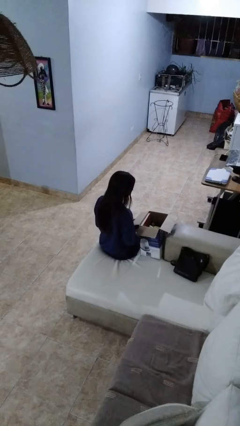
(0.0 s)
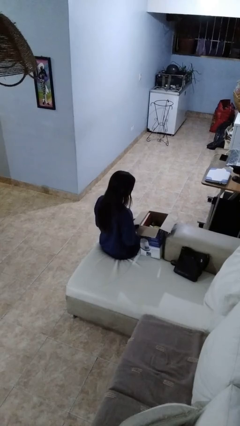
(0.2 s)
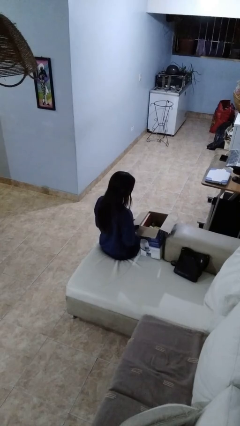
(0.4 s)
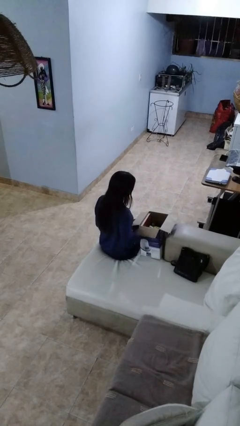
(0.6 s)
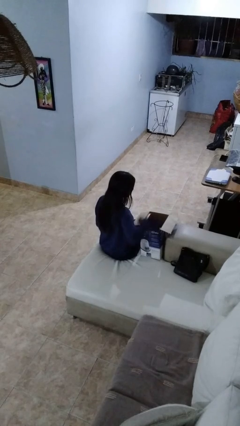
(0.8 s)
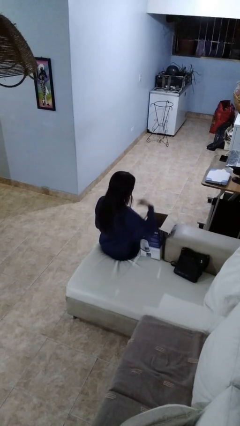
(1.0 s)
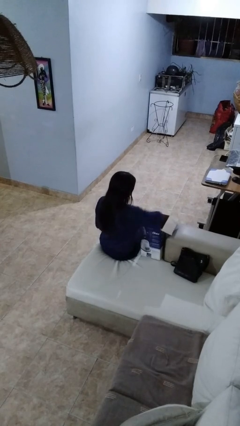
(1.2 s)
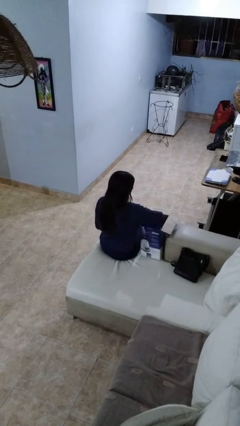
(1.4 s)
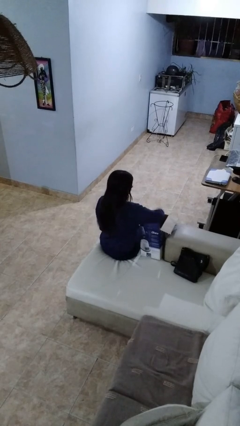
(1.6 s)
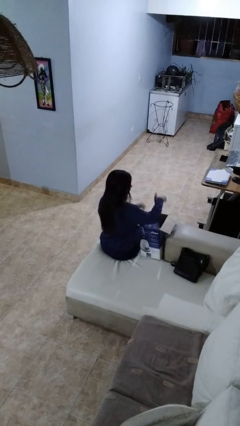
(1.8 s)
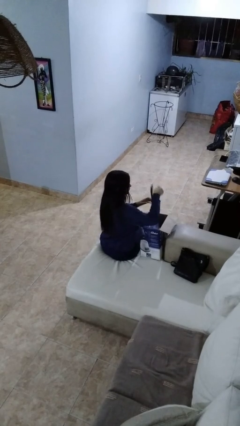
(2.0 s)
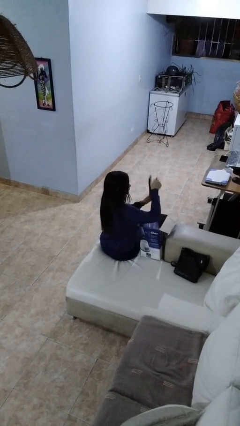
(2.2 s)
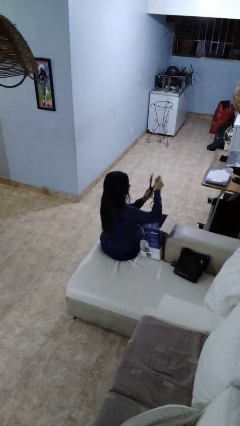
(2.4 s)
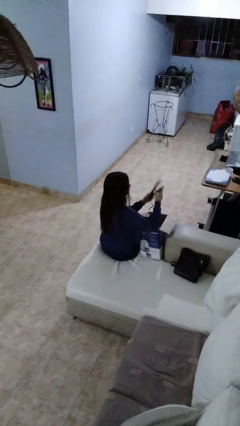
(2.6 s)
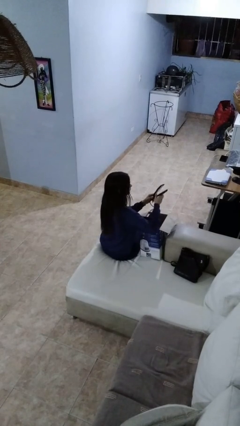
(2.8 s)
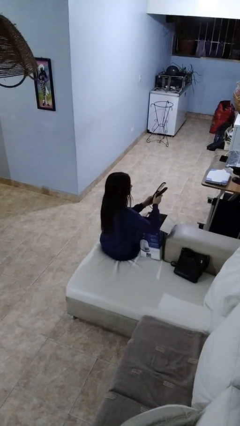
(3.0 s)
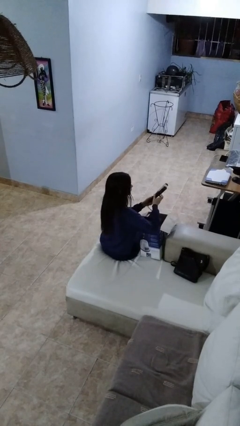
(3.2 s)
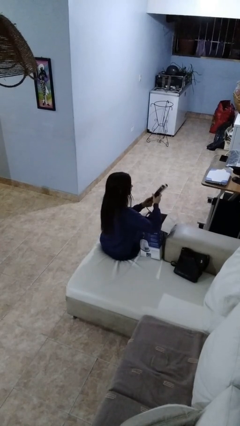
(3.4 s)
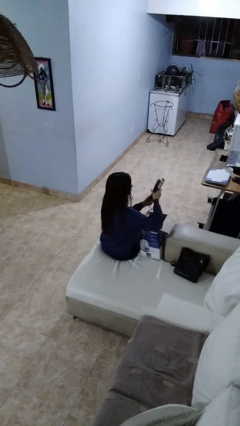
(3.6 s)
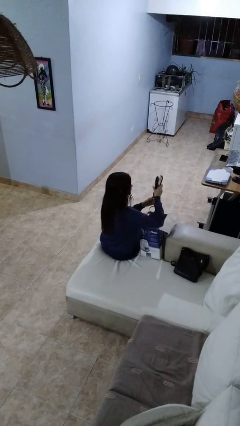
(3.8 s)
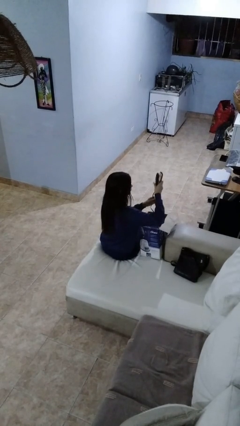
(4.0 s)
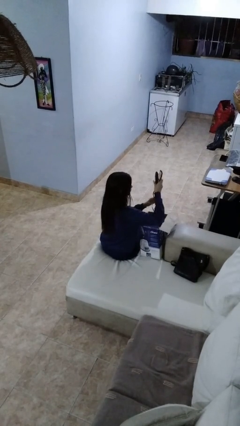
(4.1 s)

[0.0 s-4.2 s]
person takes object from box

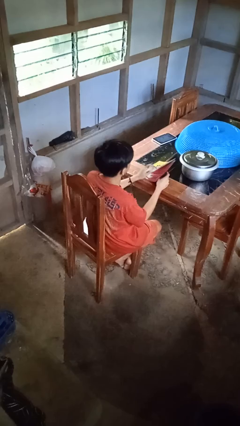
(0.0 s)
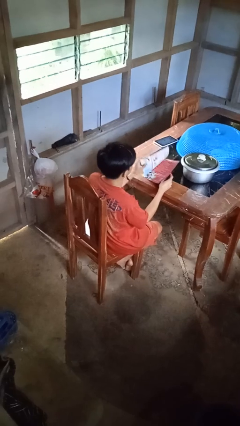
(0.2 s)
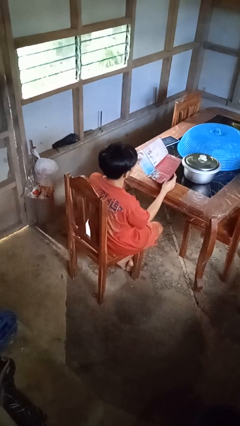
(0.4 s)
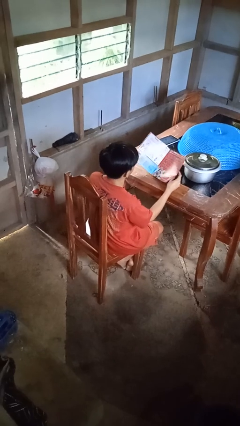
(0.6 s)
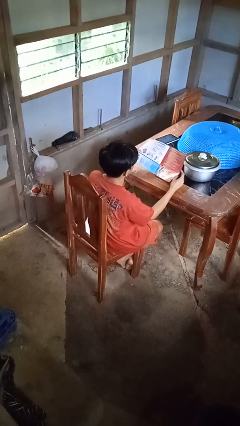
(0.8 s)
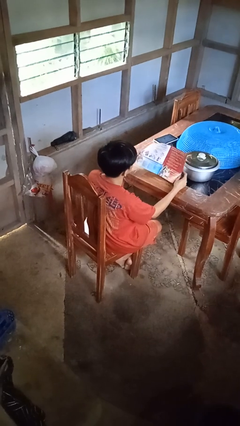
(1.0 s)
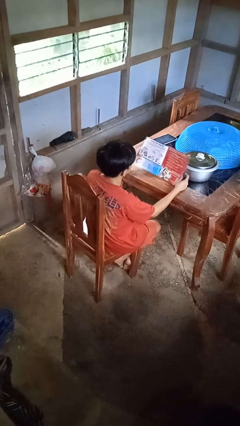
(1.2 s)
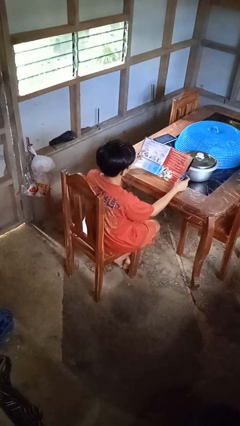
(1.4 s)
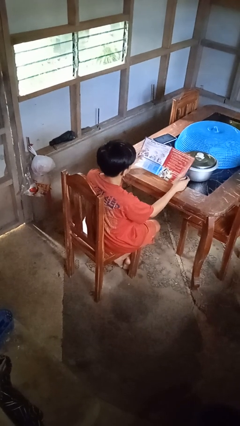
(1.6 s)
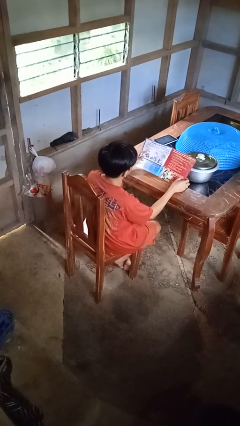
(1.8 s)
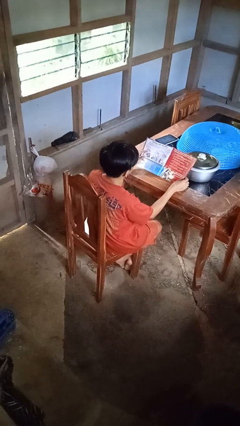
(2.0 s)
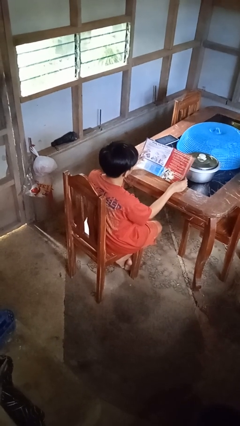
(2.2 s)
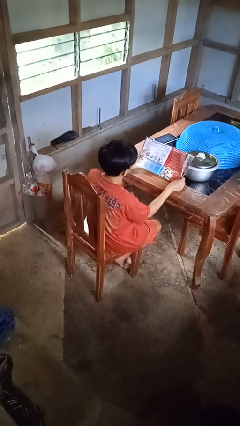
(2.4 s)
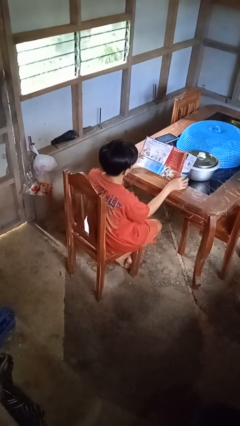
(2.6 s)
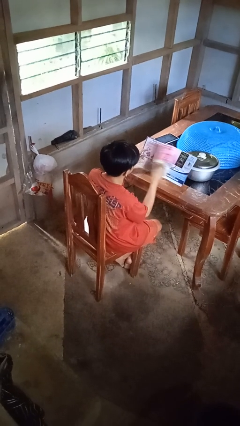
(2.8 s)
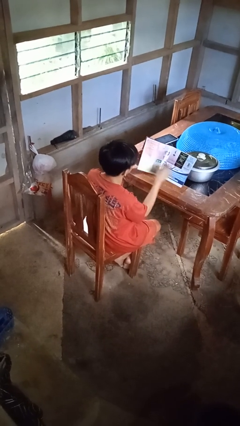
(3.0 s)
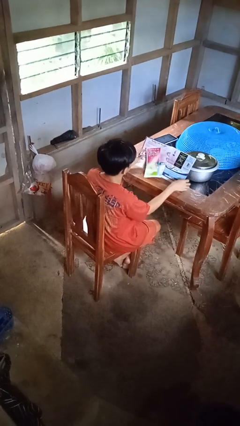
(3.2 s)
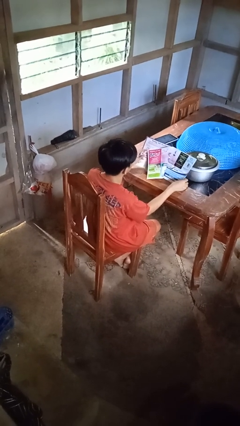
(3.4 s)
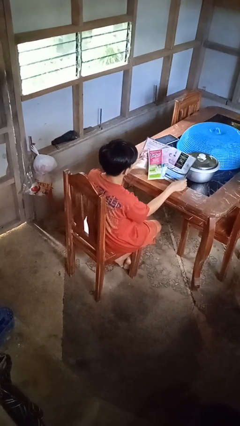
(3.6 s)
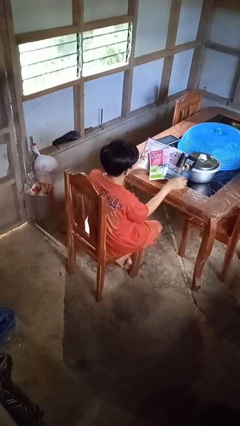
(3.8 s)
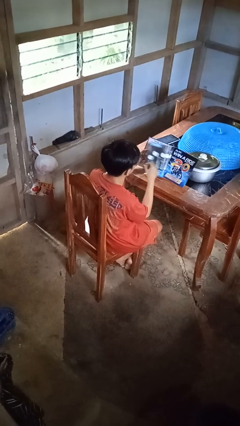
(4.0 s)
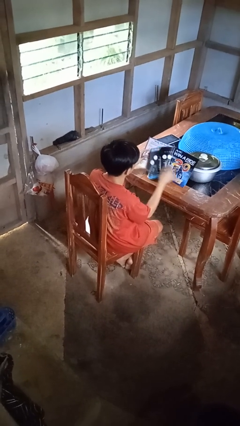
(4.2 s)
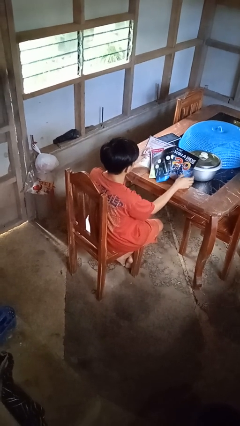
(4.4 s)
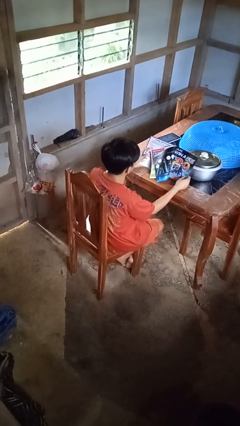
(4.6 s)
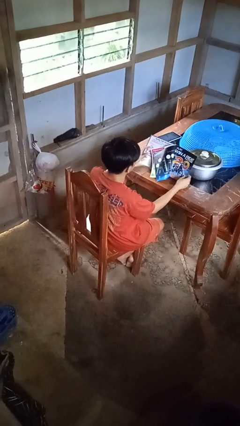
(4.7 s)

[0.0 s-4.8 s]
person reads magazine

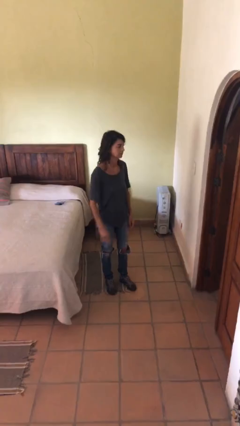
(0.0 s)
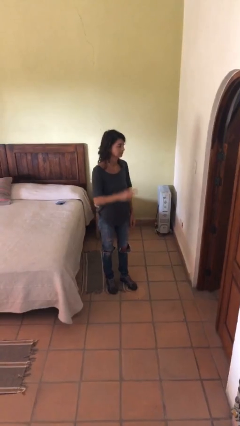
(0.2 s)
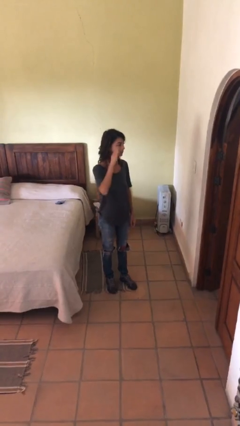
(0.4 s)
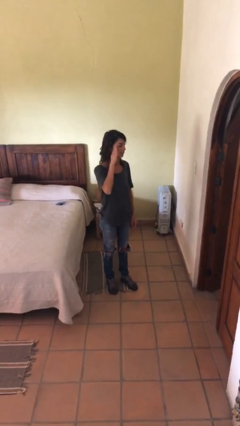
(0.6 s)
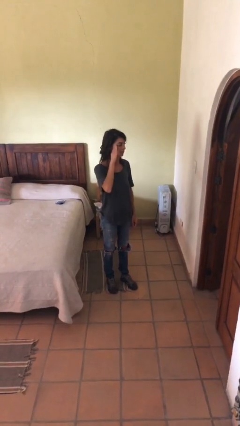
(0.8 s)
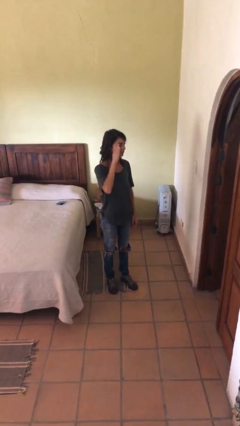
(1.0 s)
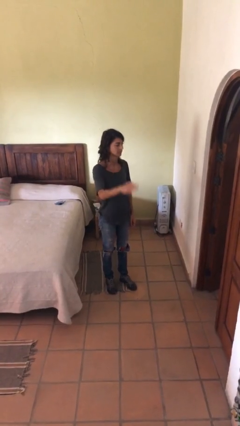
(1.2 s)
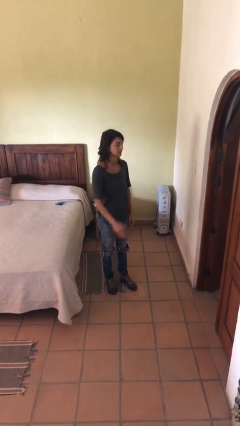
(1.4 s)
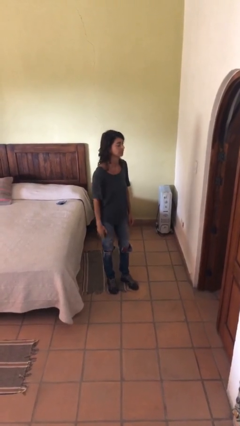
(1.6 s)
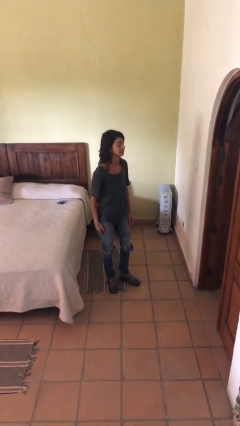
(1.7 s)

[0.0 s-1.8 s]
person salutes

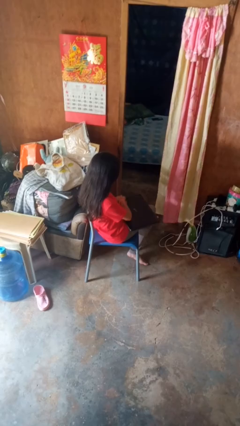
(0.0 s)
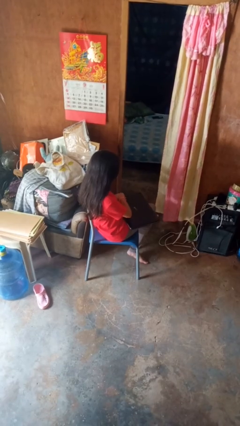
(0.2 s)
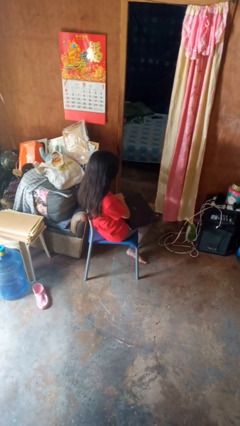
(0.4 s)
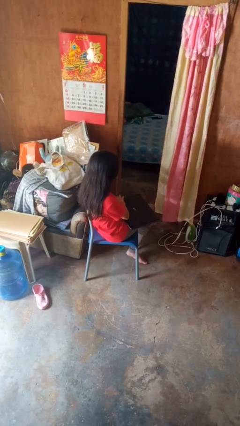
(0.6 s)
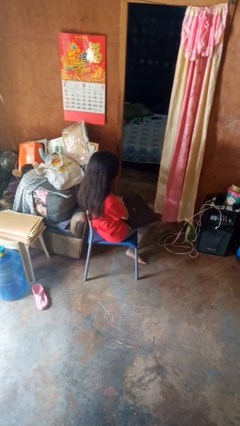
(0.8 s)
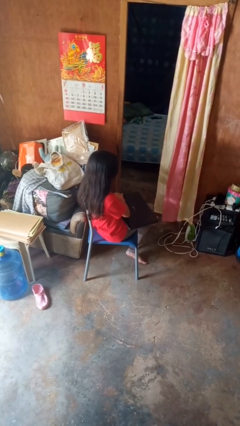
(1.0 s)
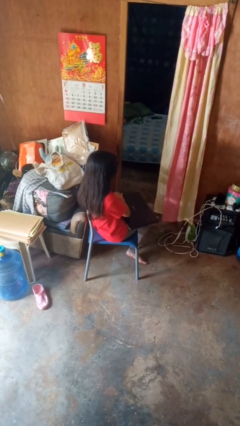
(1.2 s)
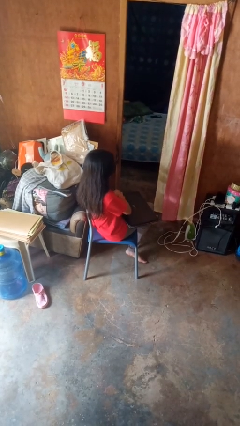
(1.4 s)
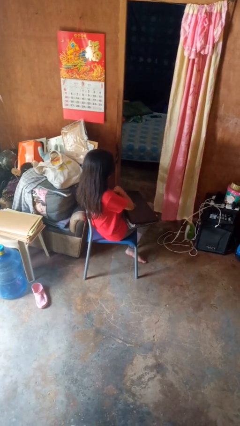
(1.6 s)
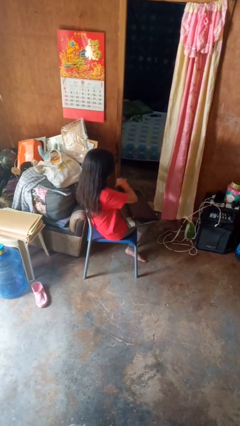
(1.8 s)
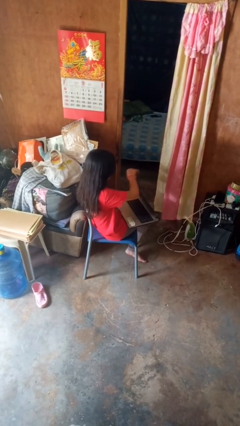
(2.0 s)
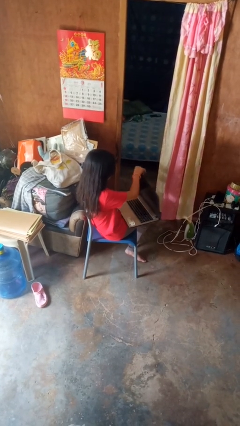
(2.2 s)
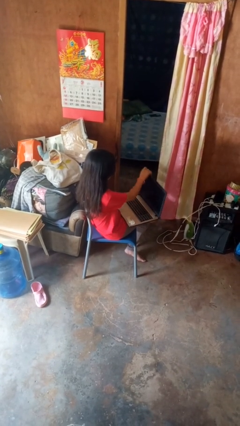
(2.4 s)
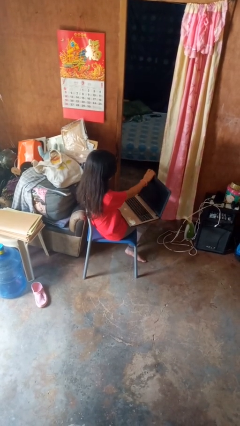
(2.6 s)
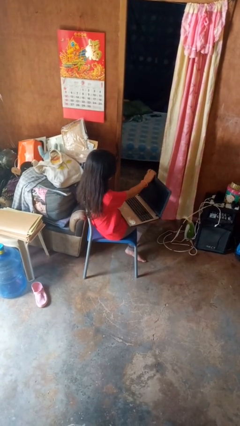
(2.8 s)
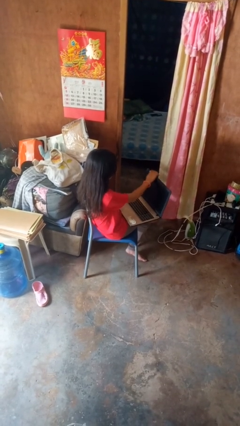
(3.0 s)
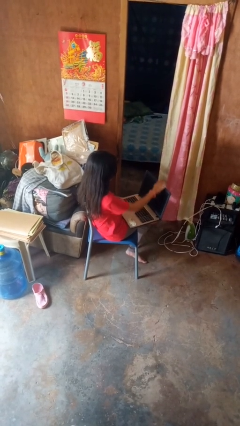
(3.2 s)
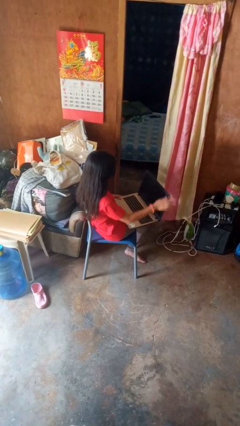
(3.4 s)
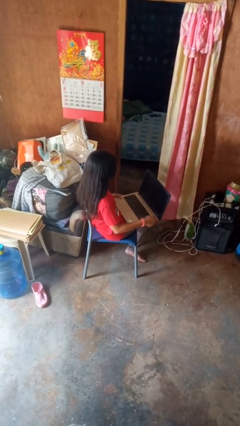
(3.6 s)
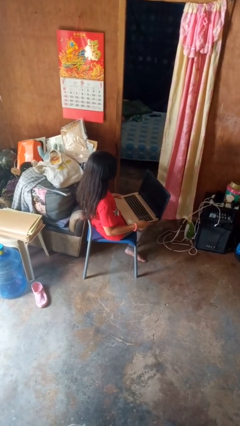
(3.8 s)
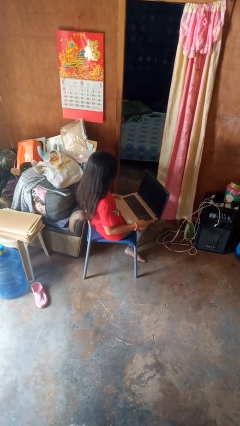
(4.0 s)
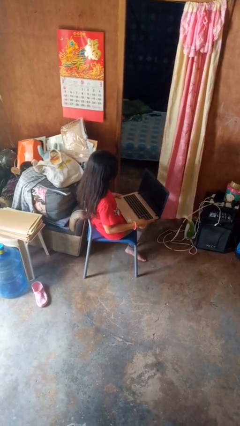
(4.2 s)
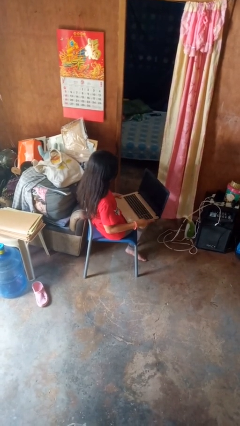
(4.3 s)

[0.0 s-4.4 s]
person opens laptop

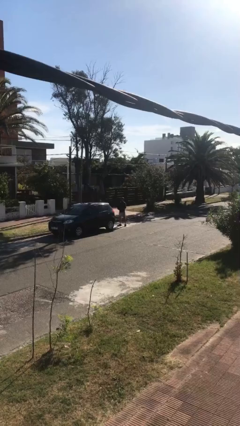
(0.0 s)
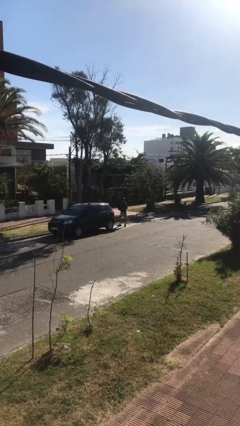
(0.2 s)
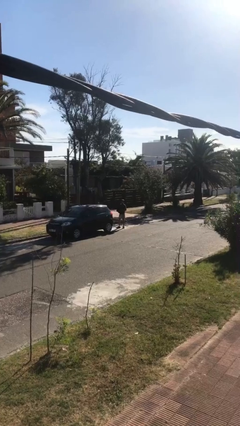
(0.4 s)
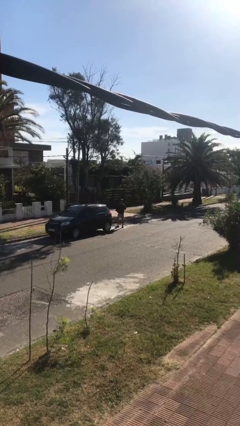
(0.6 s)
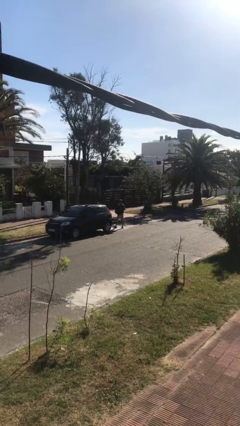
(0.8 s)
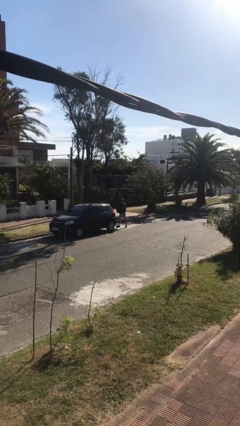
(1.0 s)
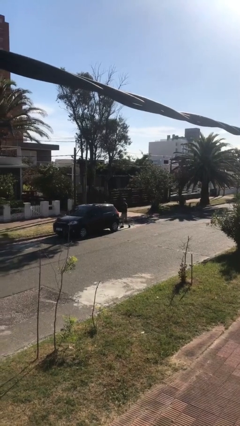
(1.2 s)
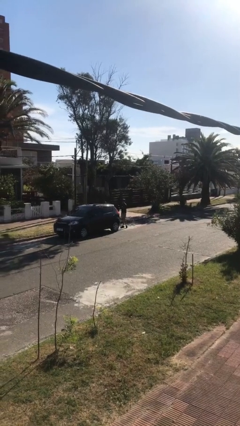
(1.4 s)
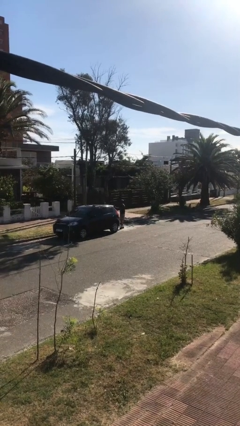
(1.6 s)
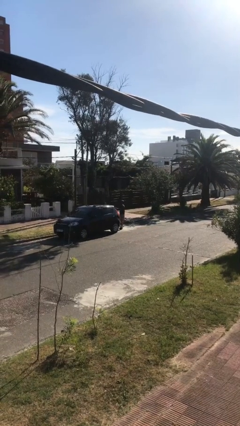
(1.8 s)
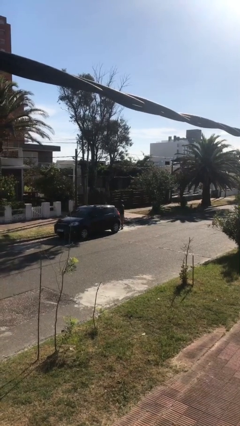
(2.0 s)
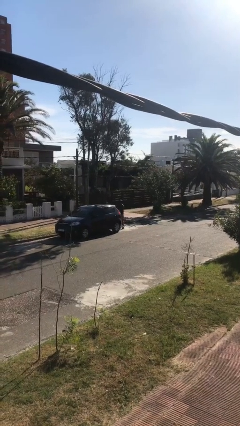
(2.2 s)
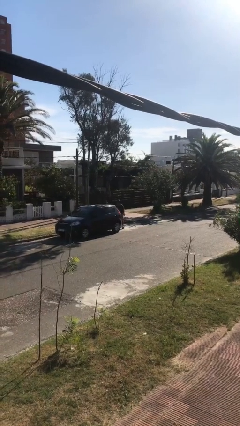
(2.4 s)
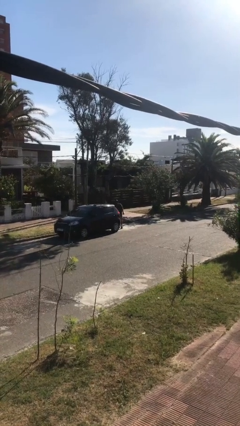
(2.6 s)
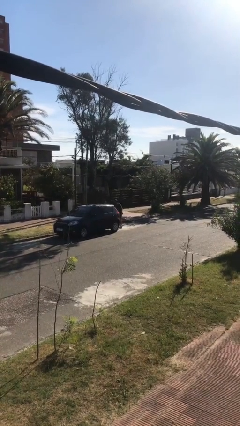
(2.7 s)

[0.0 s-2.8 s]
person loads car
